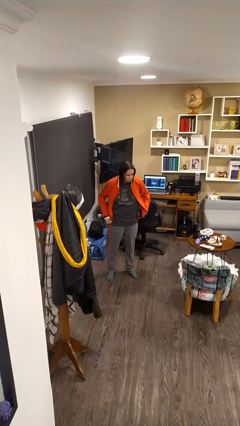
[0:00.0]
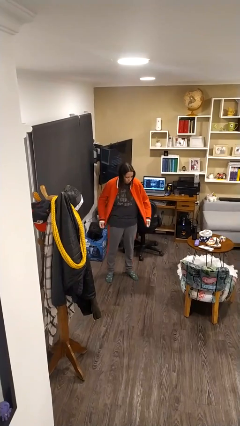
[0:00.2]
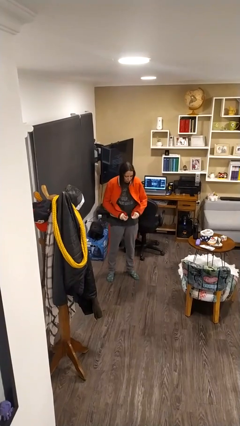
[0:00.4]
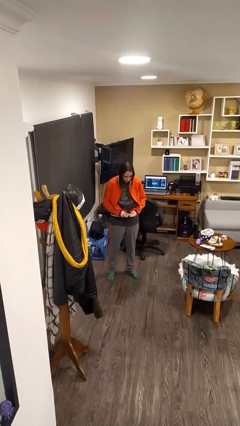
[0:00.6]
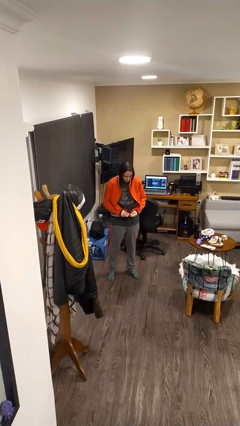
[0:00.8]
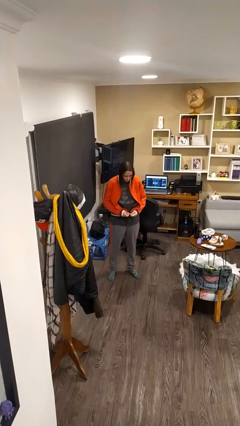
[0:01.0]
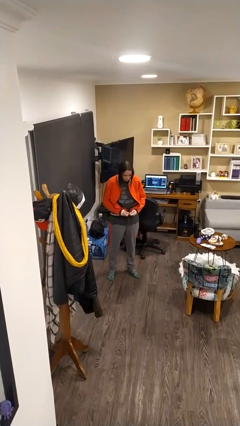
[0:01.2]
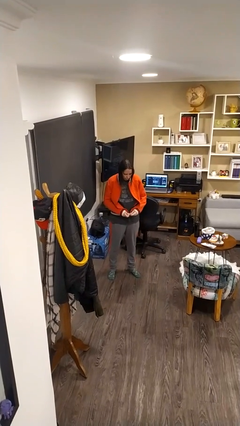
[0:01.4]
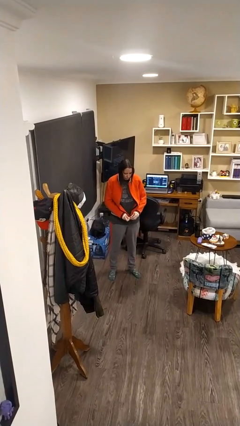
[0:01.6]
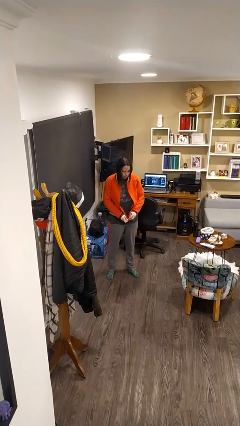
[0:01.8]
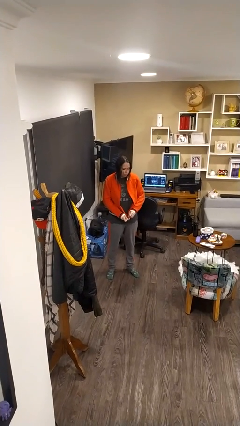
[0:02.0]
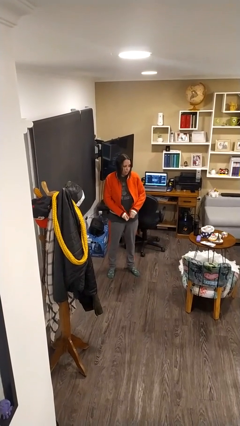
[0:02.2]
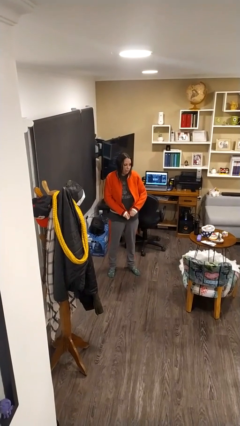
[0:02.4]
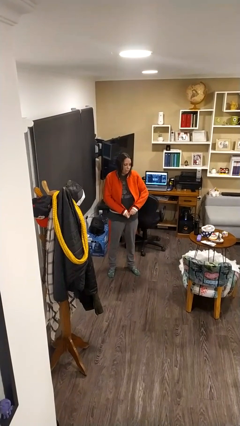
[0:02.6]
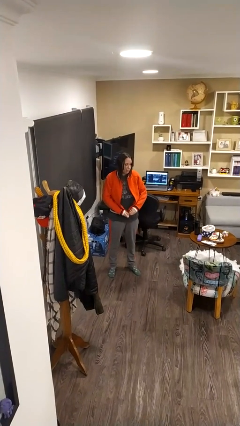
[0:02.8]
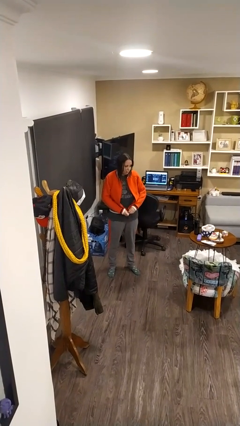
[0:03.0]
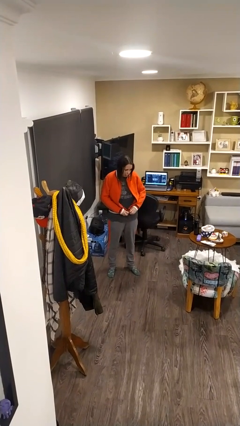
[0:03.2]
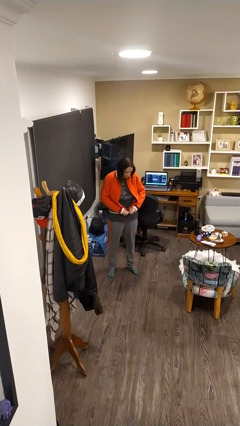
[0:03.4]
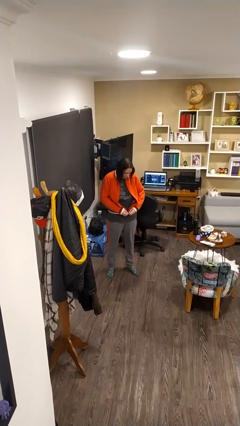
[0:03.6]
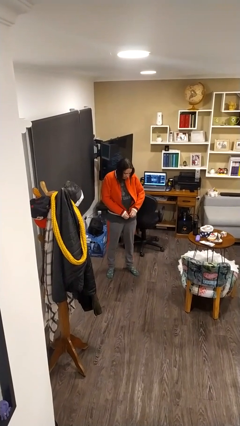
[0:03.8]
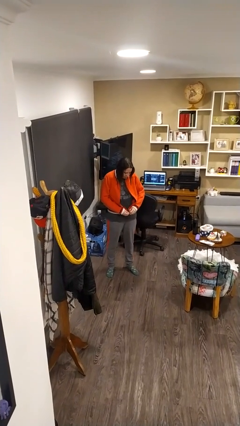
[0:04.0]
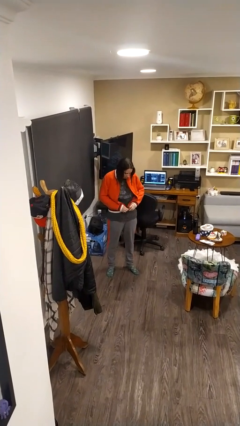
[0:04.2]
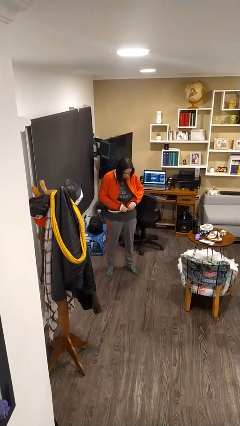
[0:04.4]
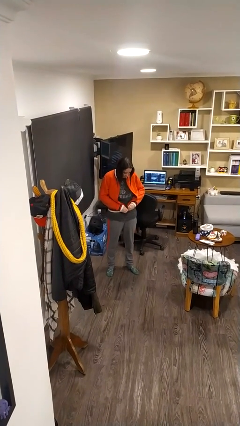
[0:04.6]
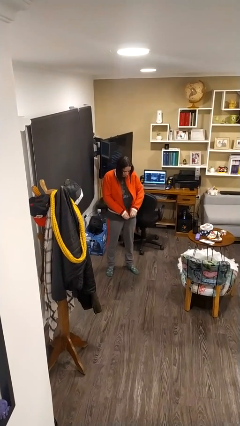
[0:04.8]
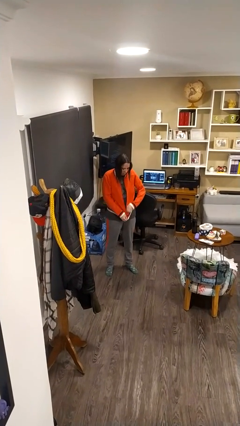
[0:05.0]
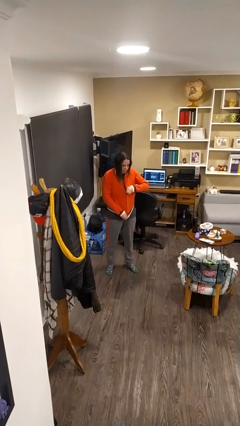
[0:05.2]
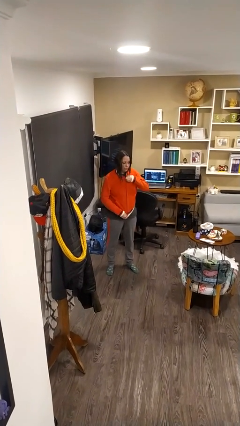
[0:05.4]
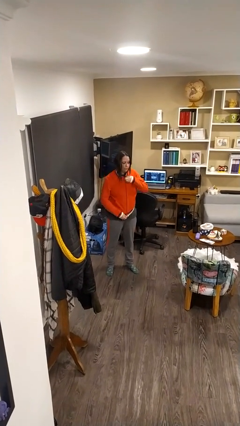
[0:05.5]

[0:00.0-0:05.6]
person zips up jacket

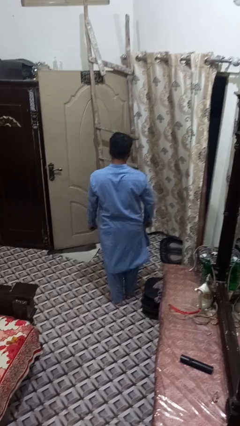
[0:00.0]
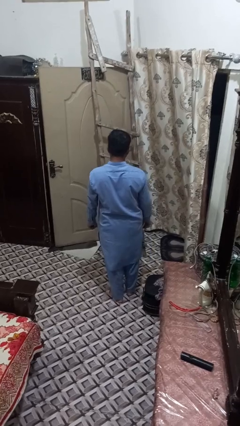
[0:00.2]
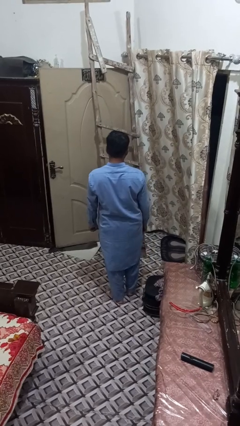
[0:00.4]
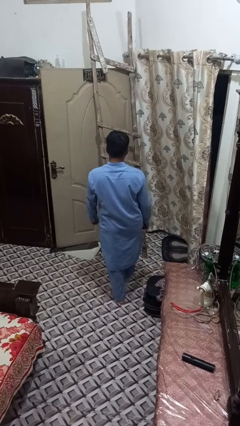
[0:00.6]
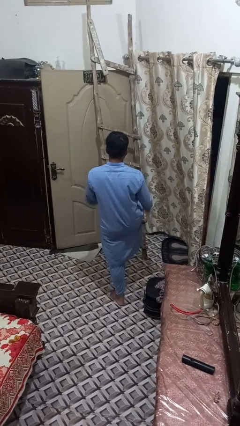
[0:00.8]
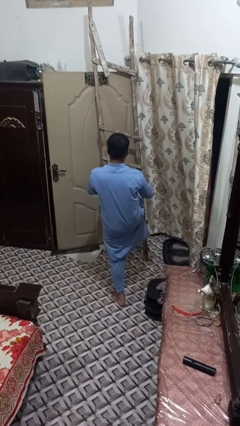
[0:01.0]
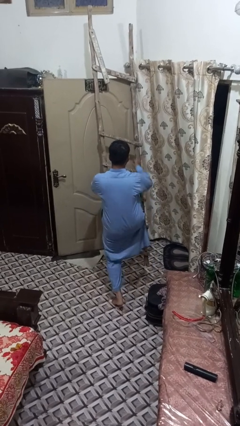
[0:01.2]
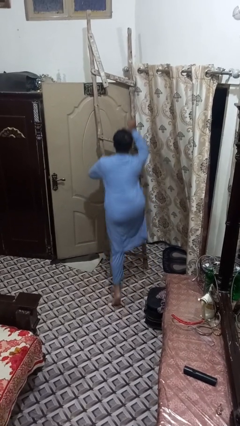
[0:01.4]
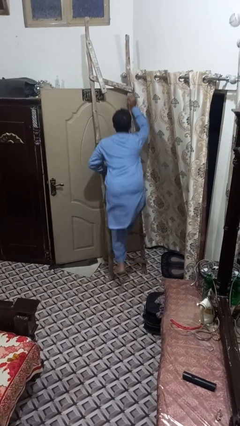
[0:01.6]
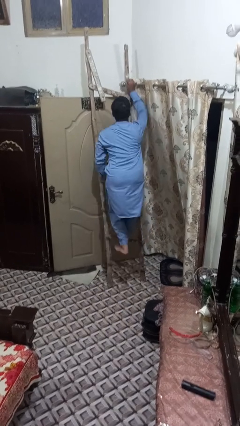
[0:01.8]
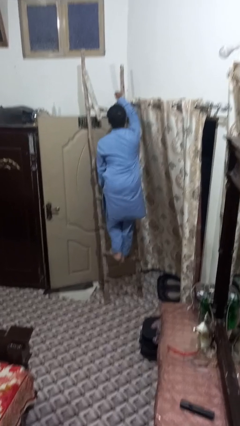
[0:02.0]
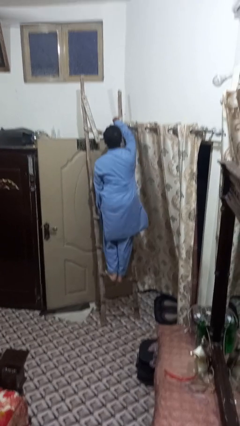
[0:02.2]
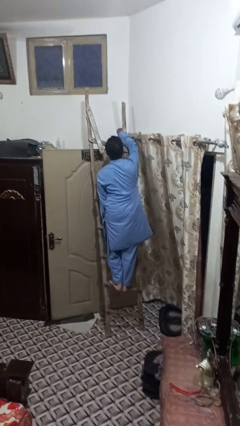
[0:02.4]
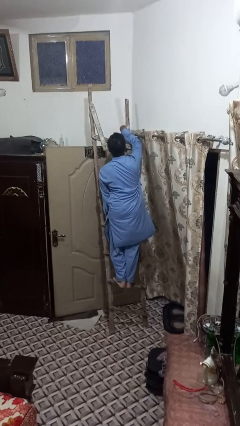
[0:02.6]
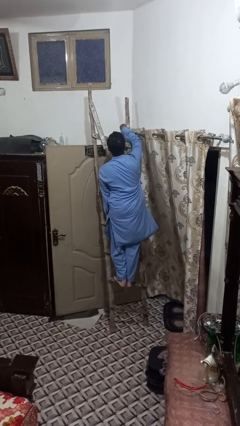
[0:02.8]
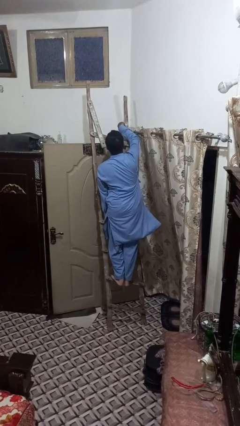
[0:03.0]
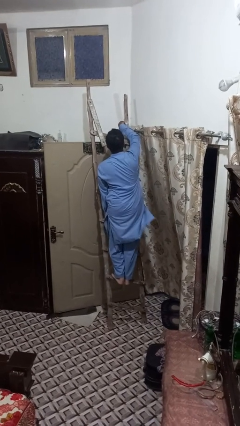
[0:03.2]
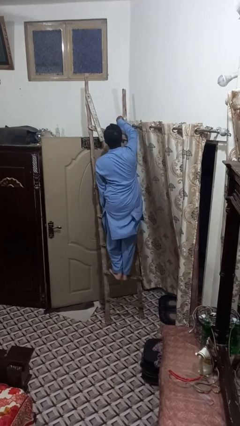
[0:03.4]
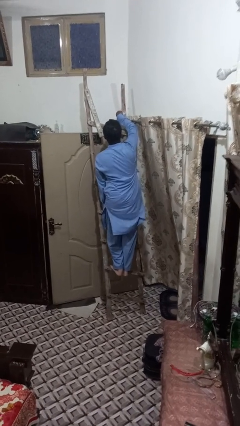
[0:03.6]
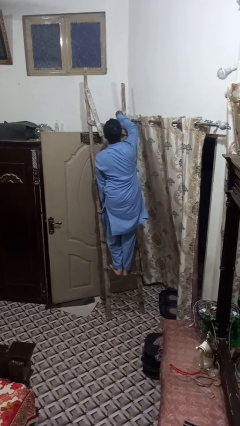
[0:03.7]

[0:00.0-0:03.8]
person climbs up ladder

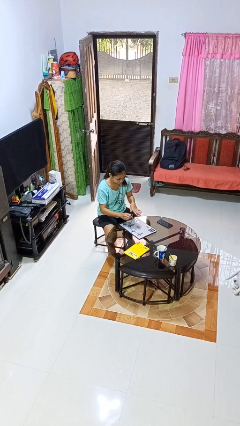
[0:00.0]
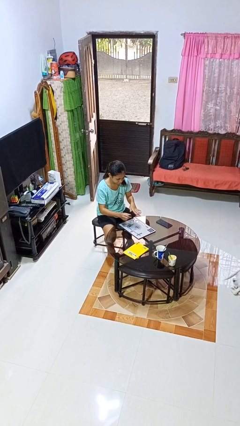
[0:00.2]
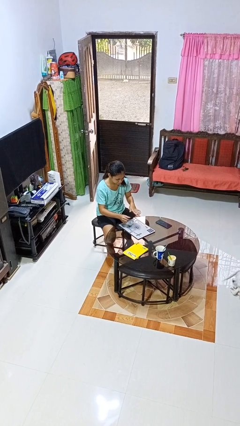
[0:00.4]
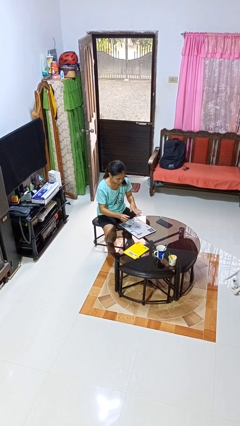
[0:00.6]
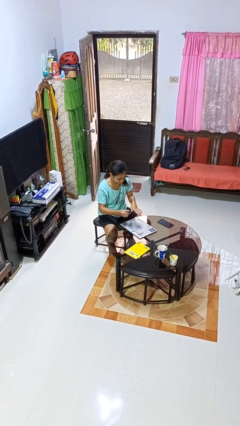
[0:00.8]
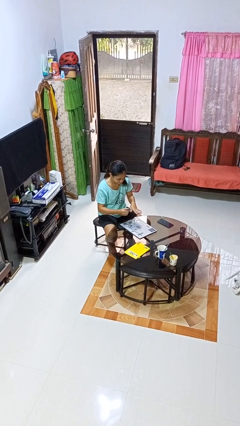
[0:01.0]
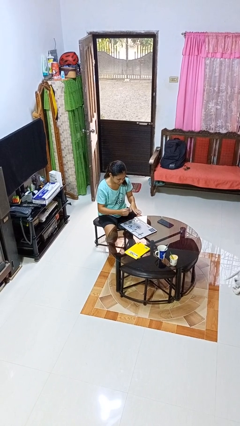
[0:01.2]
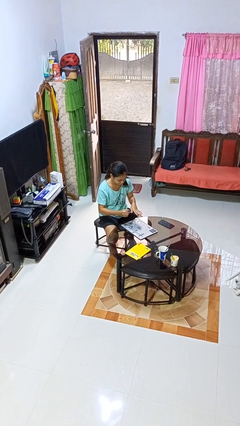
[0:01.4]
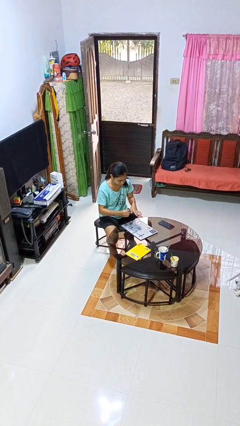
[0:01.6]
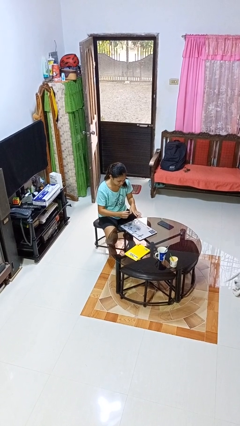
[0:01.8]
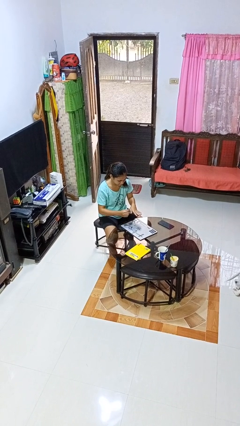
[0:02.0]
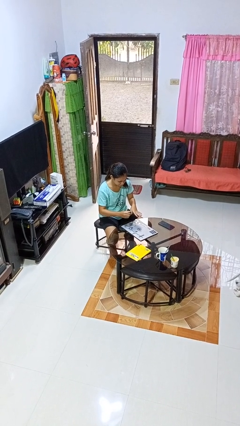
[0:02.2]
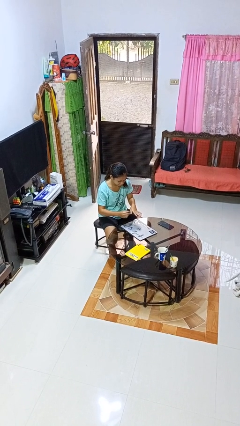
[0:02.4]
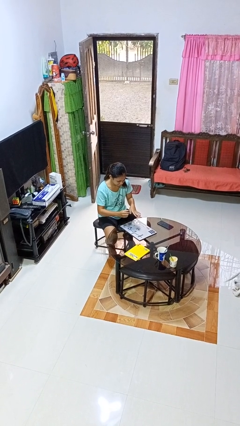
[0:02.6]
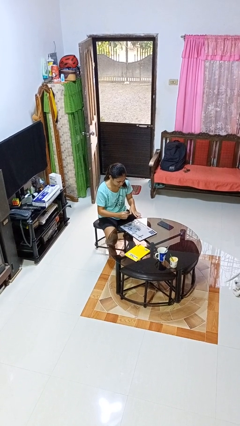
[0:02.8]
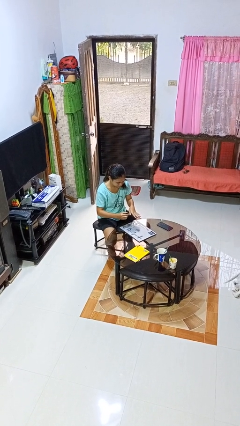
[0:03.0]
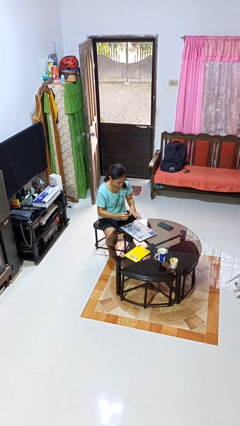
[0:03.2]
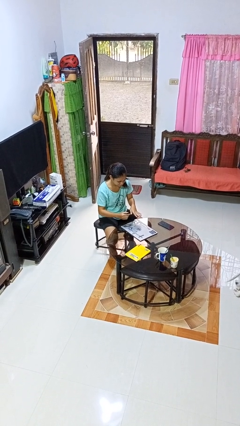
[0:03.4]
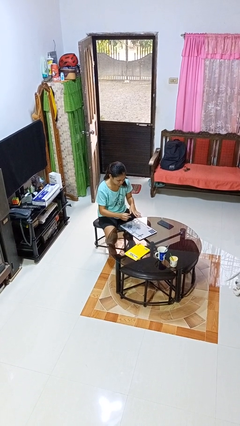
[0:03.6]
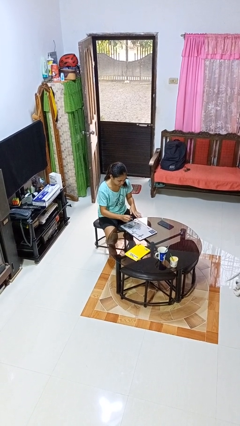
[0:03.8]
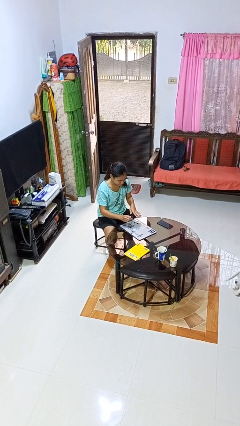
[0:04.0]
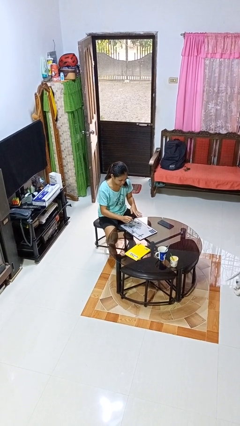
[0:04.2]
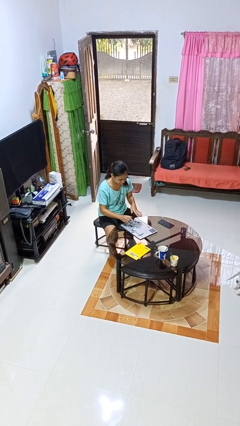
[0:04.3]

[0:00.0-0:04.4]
person paints fingernails

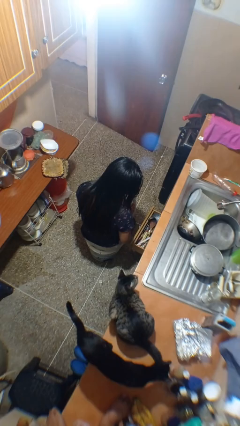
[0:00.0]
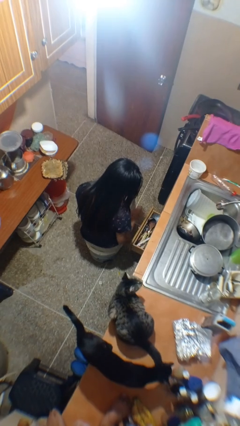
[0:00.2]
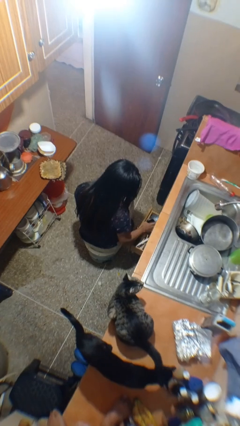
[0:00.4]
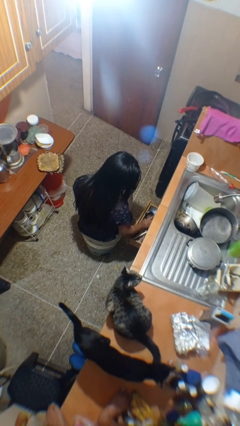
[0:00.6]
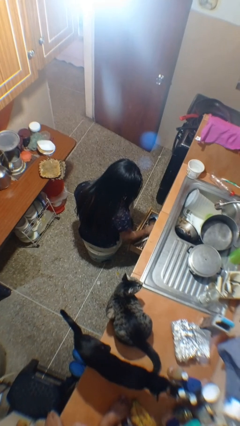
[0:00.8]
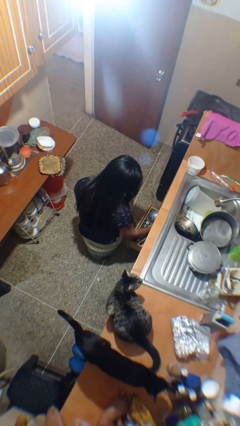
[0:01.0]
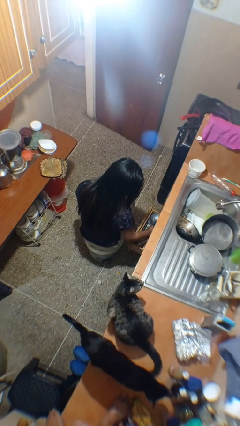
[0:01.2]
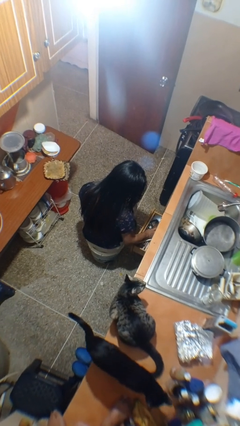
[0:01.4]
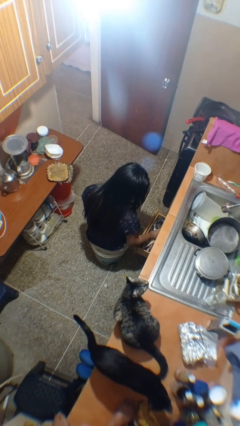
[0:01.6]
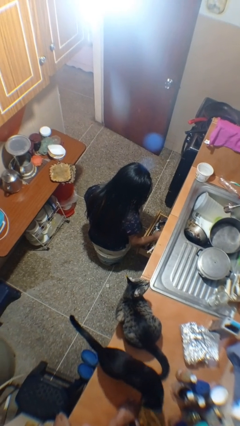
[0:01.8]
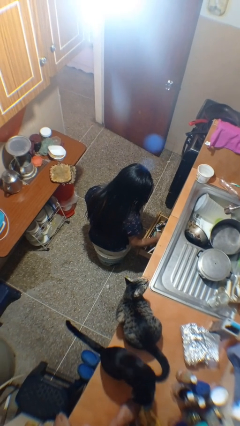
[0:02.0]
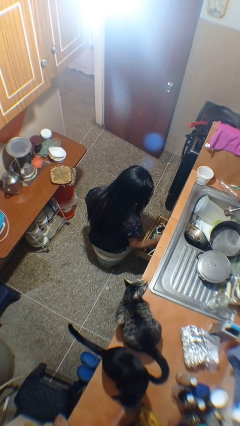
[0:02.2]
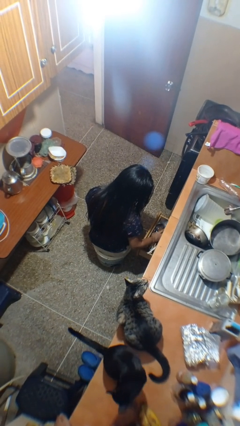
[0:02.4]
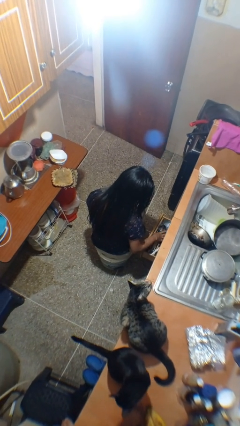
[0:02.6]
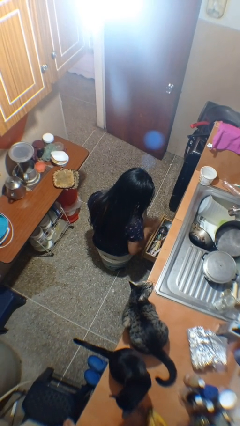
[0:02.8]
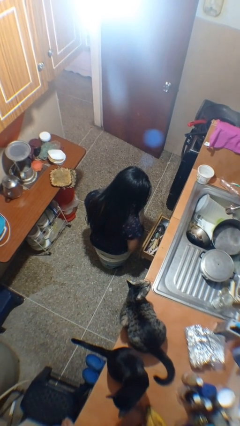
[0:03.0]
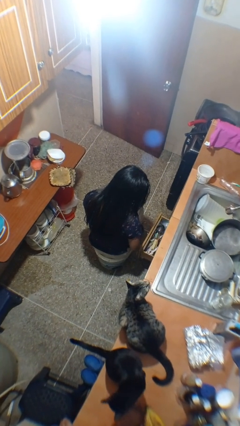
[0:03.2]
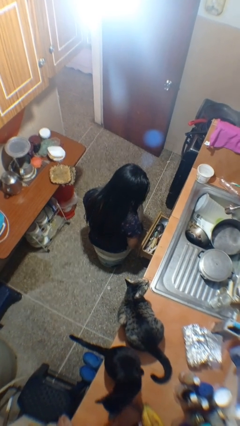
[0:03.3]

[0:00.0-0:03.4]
person searches in kitchen drawer

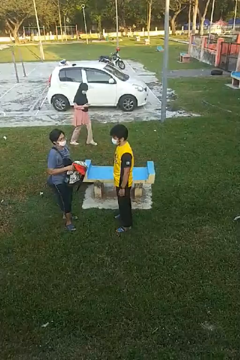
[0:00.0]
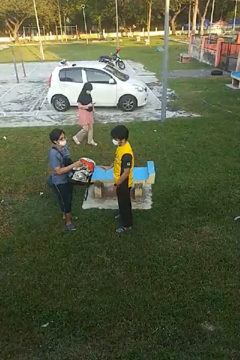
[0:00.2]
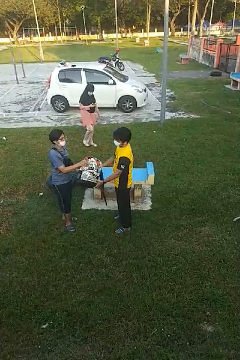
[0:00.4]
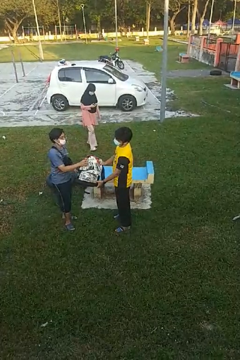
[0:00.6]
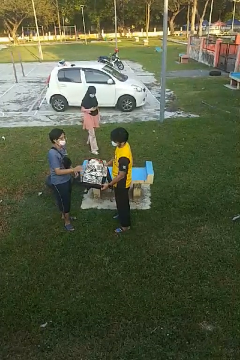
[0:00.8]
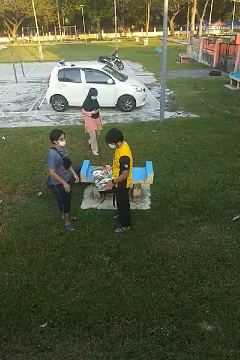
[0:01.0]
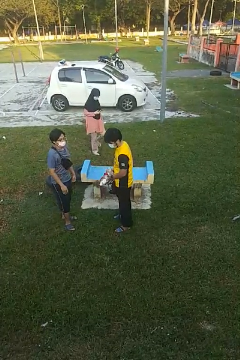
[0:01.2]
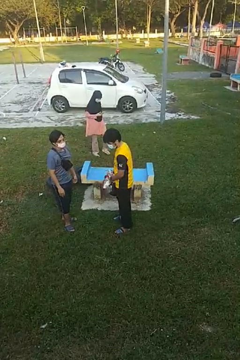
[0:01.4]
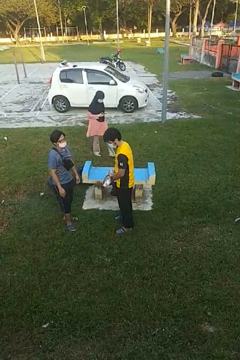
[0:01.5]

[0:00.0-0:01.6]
person transfers object to person
